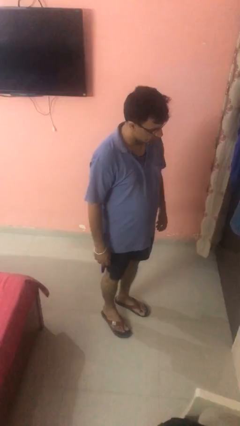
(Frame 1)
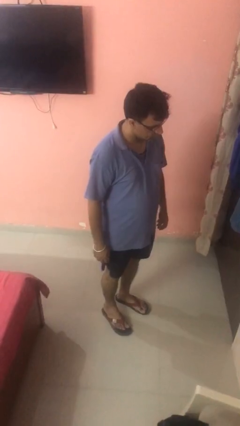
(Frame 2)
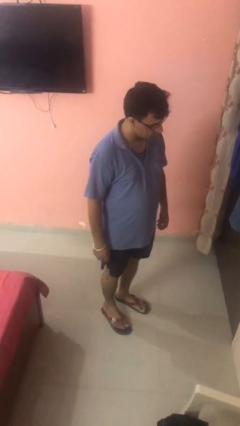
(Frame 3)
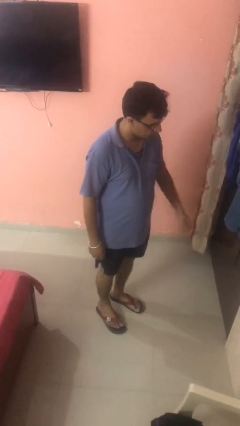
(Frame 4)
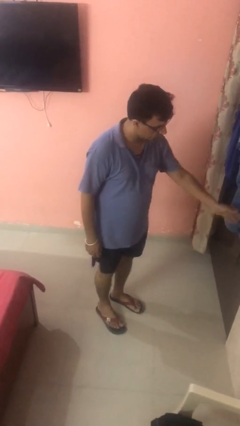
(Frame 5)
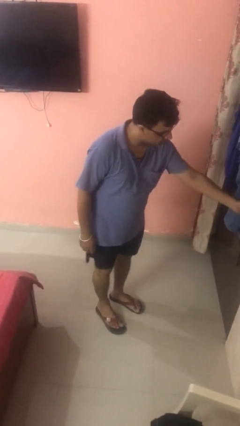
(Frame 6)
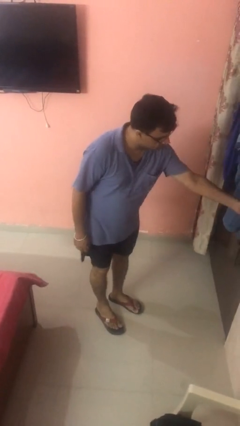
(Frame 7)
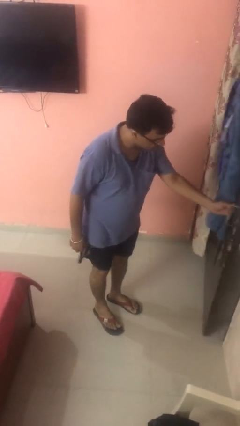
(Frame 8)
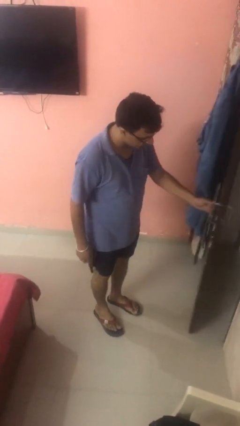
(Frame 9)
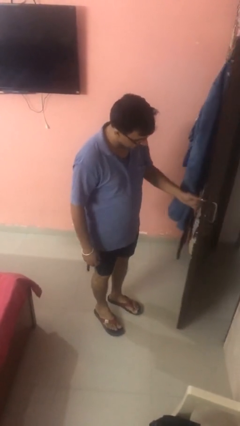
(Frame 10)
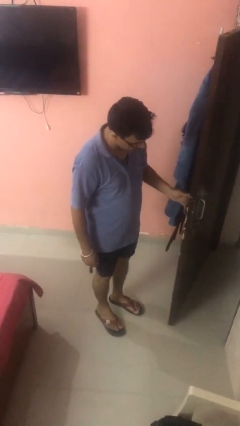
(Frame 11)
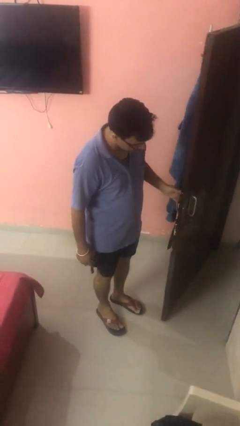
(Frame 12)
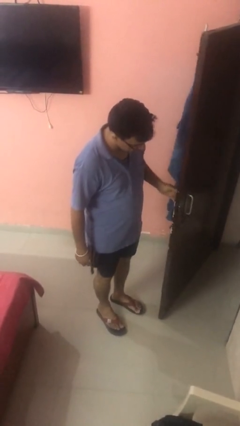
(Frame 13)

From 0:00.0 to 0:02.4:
person opens facility door

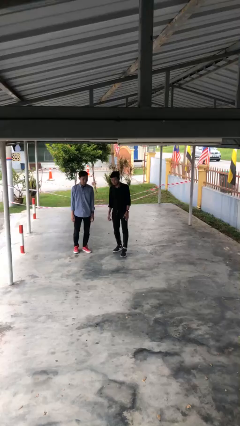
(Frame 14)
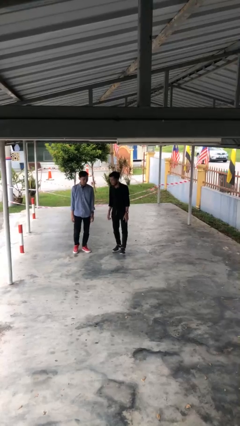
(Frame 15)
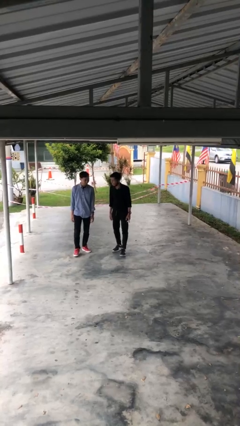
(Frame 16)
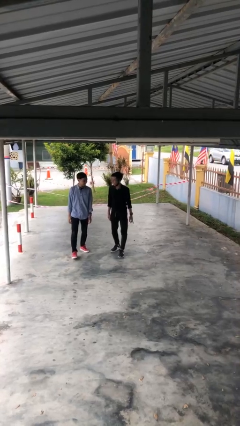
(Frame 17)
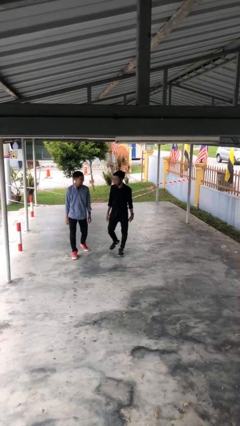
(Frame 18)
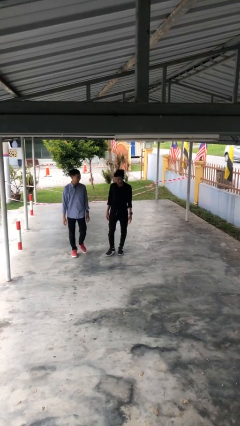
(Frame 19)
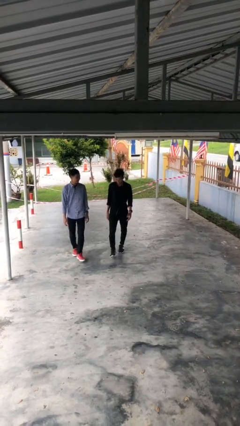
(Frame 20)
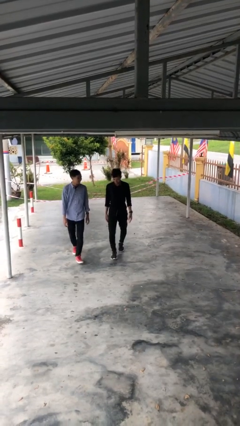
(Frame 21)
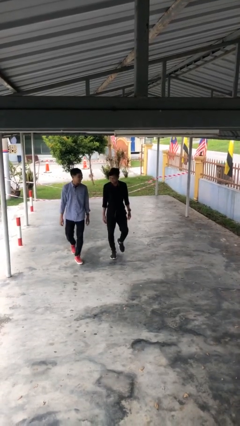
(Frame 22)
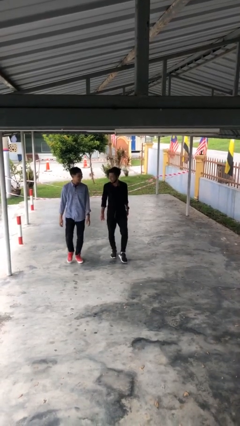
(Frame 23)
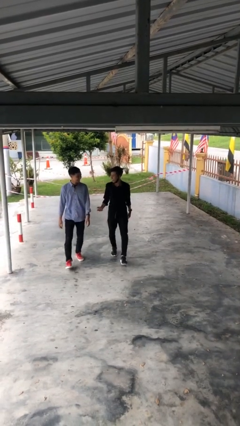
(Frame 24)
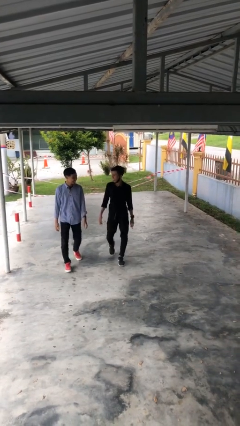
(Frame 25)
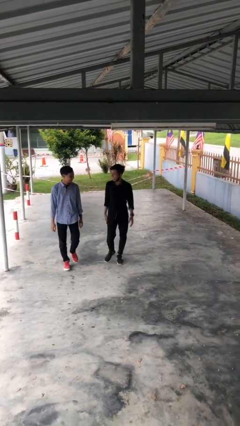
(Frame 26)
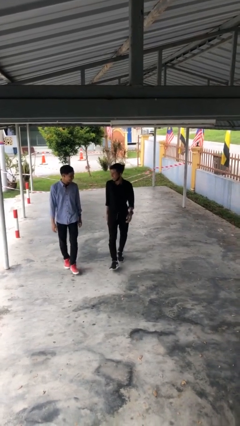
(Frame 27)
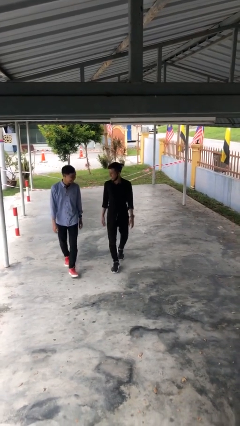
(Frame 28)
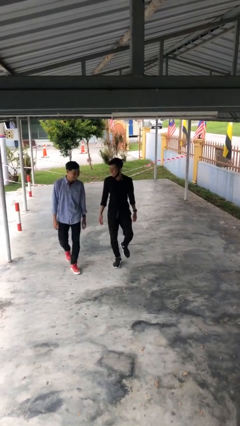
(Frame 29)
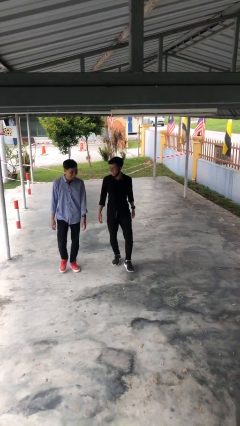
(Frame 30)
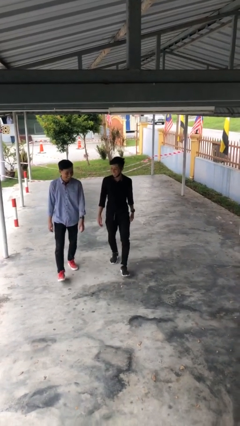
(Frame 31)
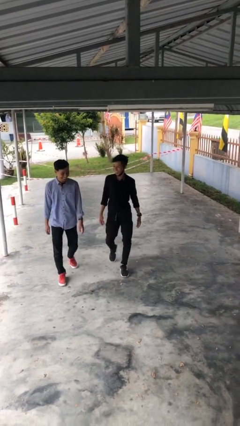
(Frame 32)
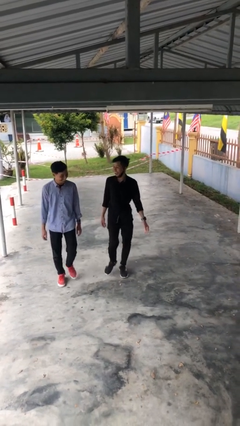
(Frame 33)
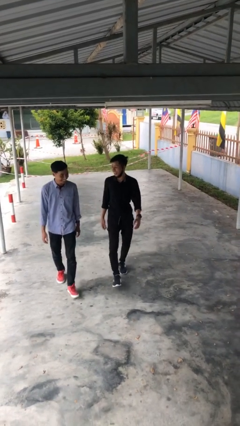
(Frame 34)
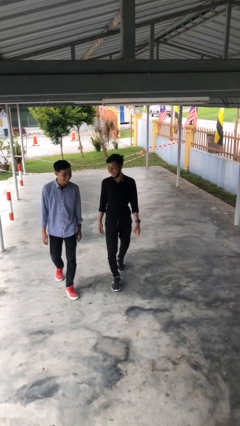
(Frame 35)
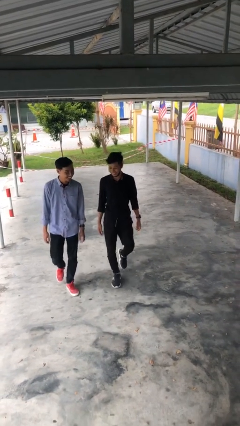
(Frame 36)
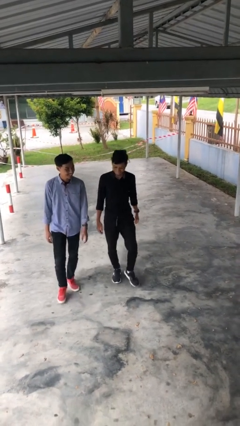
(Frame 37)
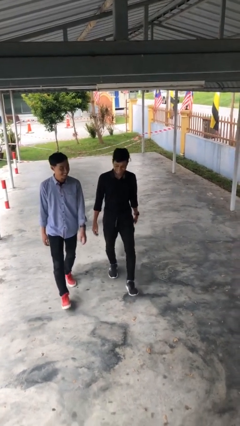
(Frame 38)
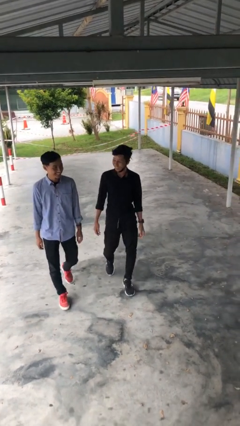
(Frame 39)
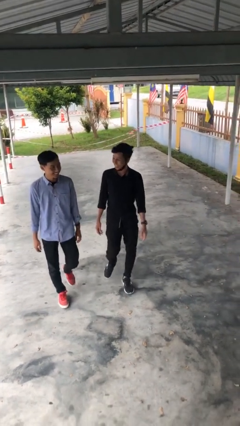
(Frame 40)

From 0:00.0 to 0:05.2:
person talks to person

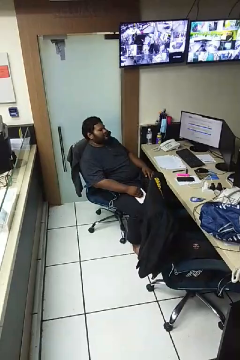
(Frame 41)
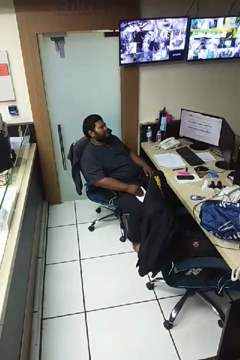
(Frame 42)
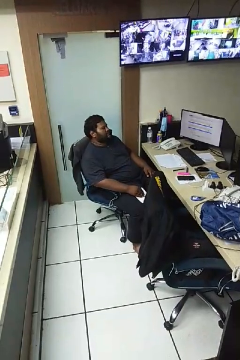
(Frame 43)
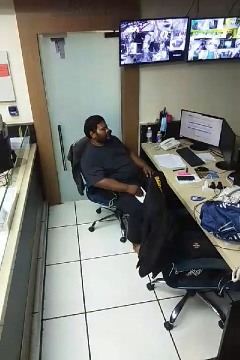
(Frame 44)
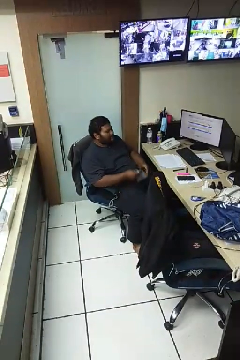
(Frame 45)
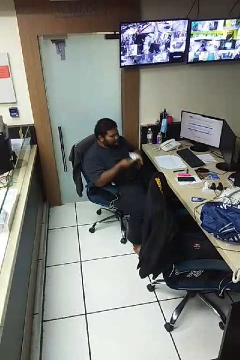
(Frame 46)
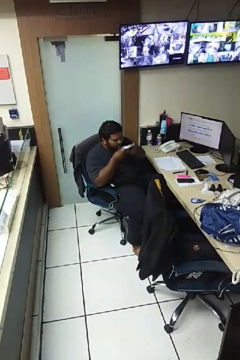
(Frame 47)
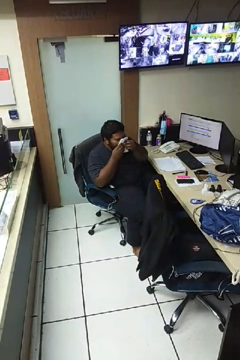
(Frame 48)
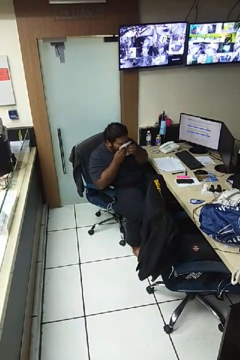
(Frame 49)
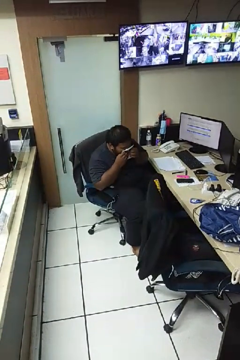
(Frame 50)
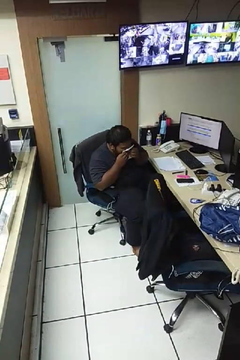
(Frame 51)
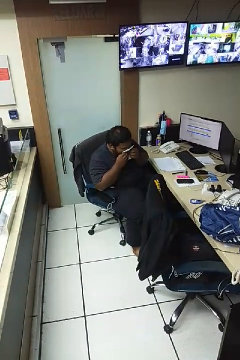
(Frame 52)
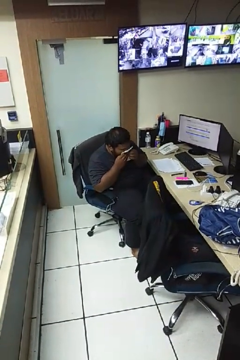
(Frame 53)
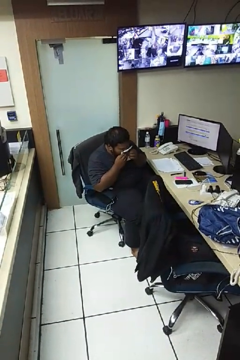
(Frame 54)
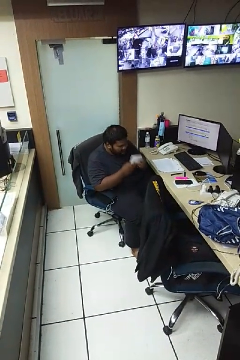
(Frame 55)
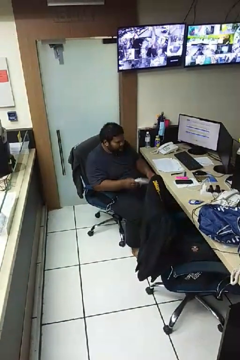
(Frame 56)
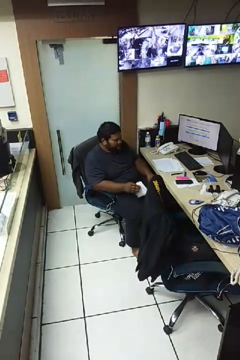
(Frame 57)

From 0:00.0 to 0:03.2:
person blows nose

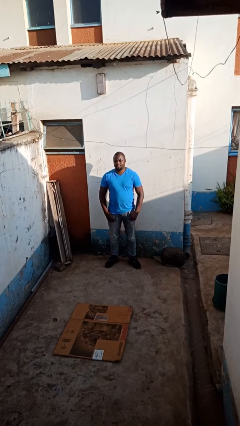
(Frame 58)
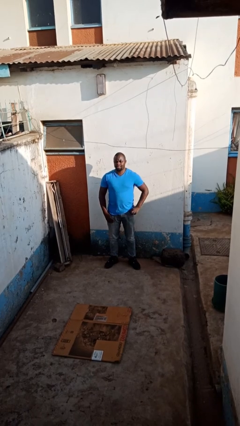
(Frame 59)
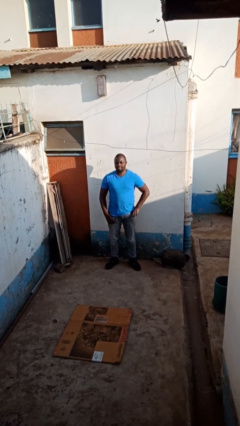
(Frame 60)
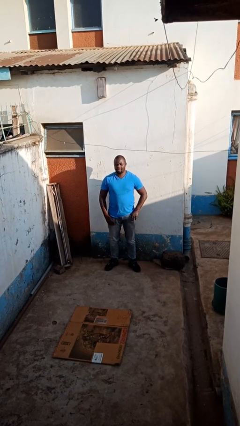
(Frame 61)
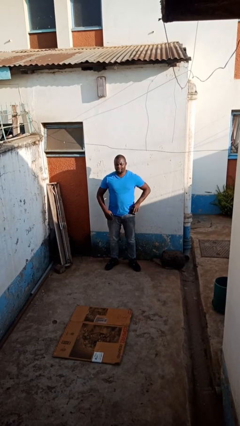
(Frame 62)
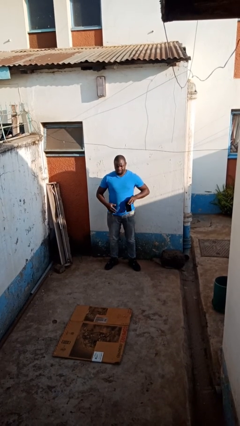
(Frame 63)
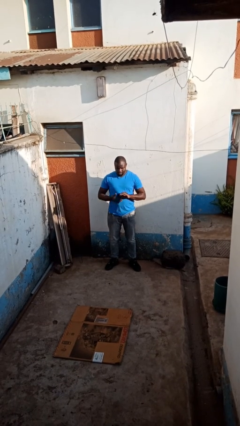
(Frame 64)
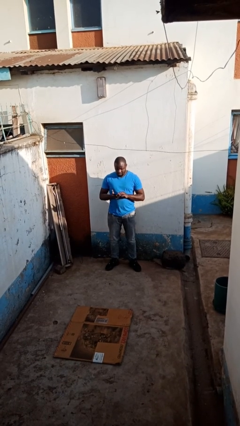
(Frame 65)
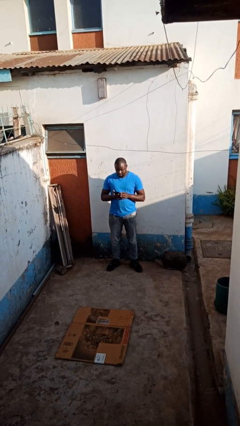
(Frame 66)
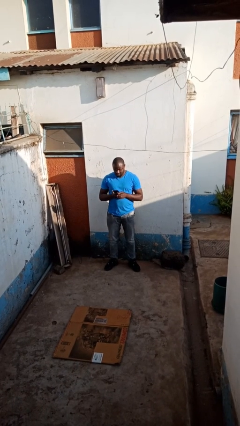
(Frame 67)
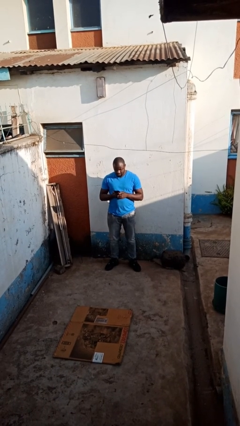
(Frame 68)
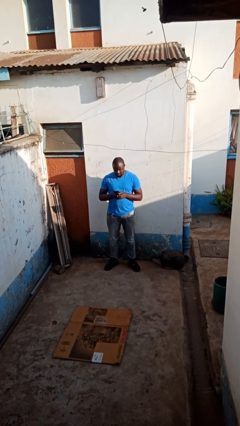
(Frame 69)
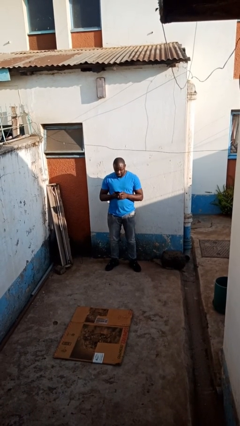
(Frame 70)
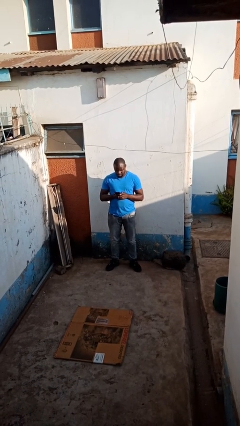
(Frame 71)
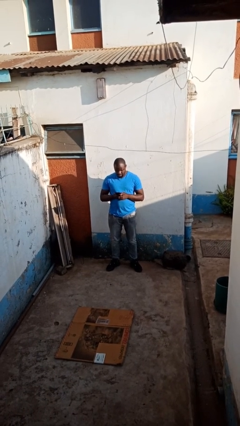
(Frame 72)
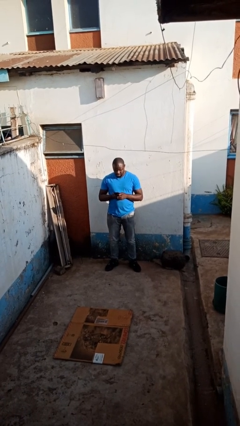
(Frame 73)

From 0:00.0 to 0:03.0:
person takes phone from pocket

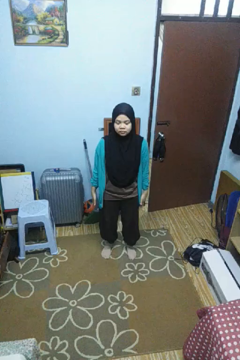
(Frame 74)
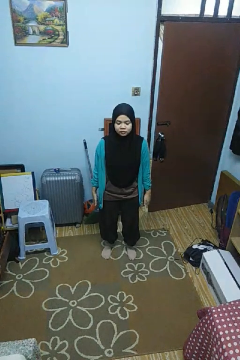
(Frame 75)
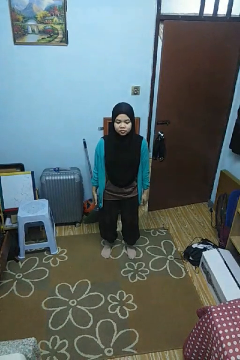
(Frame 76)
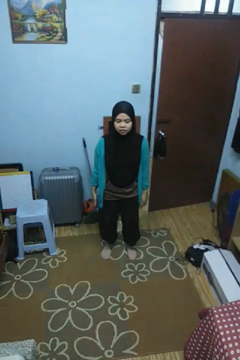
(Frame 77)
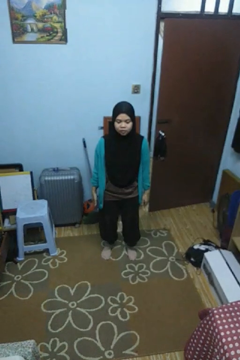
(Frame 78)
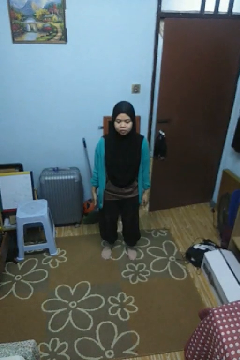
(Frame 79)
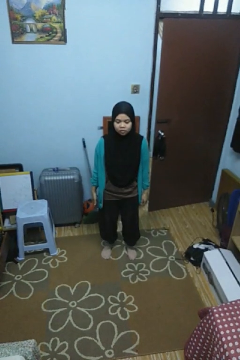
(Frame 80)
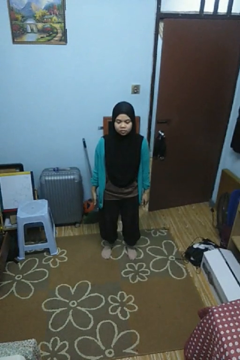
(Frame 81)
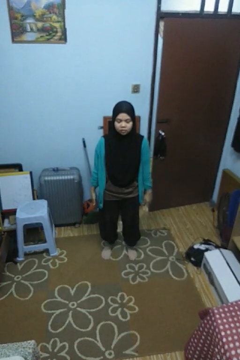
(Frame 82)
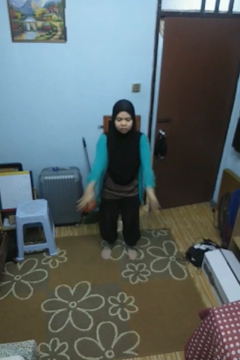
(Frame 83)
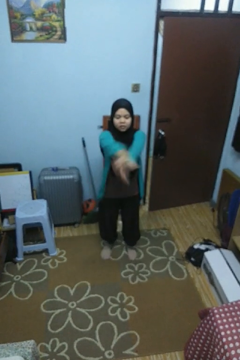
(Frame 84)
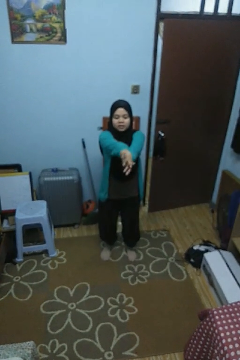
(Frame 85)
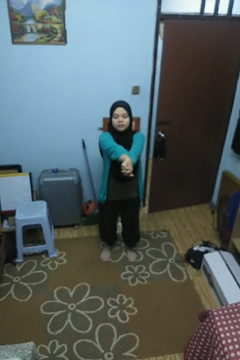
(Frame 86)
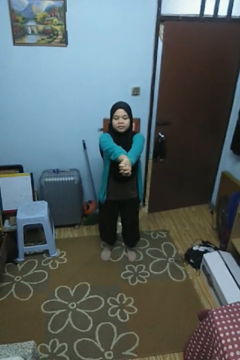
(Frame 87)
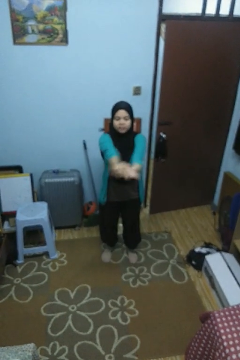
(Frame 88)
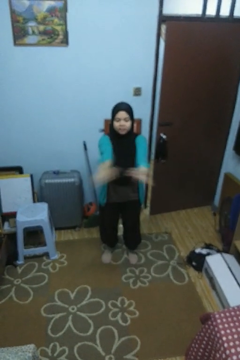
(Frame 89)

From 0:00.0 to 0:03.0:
person crosses arms

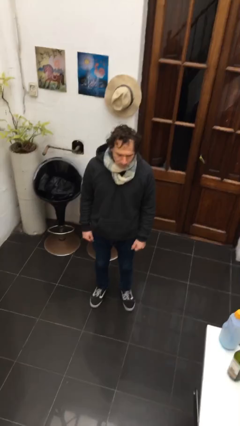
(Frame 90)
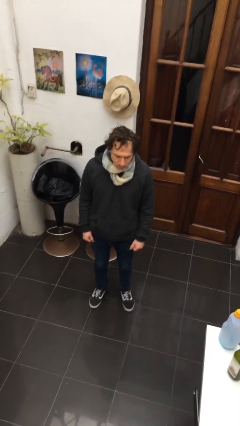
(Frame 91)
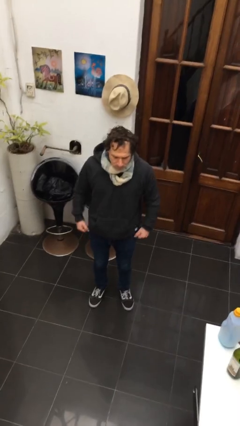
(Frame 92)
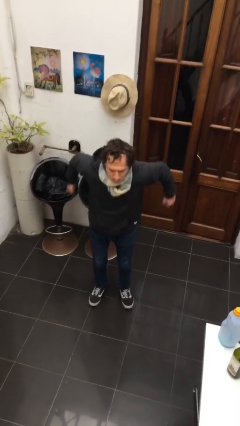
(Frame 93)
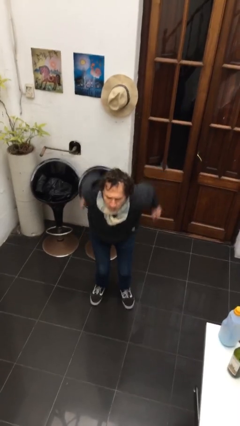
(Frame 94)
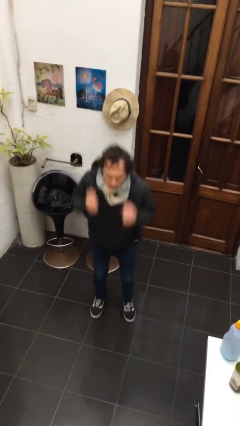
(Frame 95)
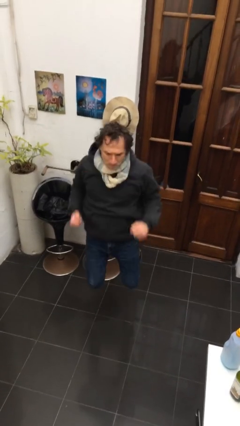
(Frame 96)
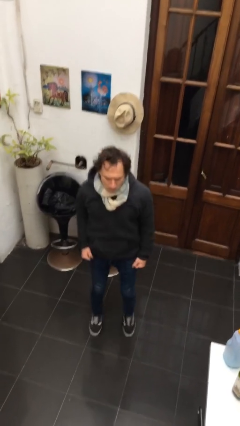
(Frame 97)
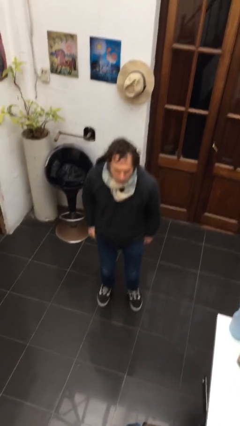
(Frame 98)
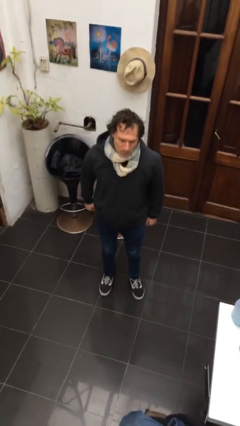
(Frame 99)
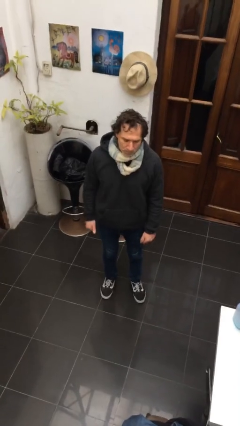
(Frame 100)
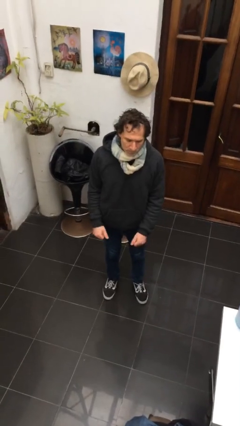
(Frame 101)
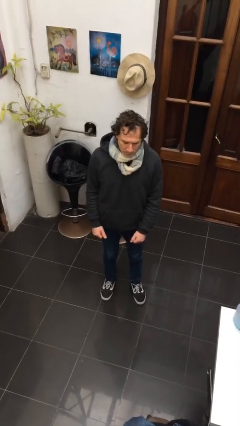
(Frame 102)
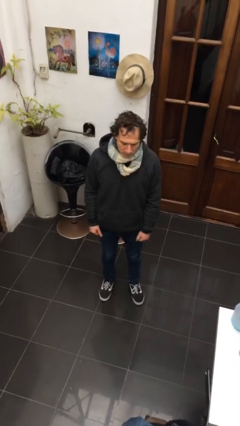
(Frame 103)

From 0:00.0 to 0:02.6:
person jumps
